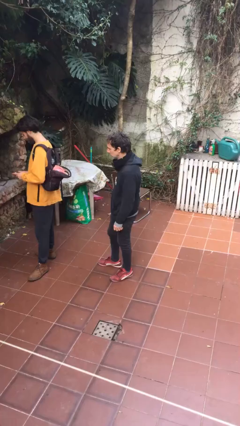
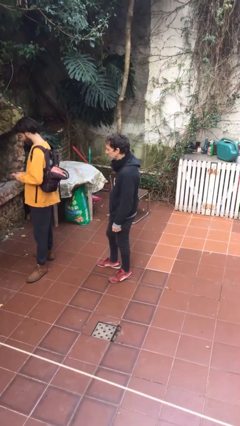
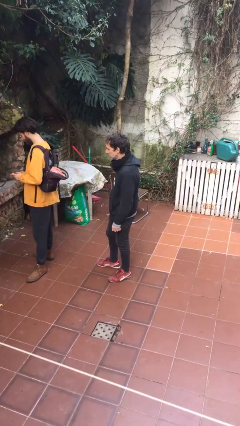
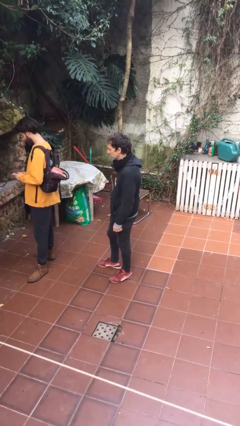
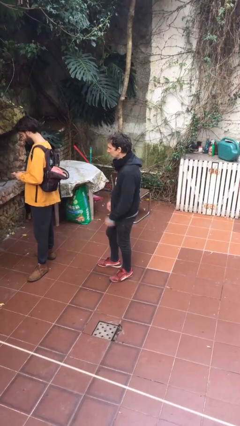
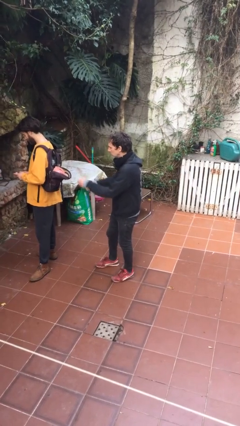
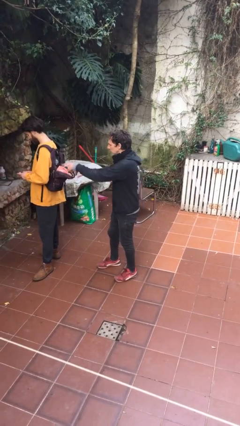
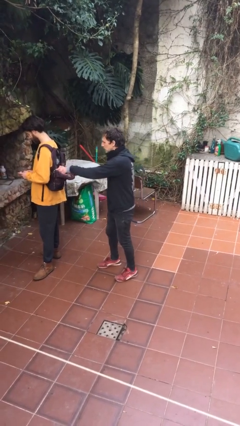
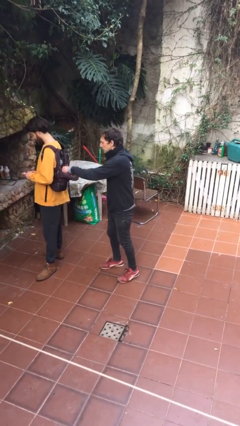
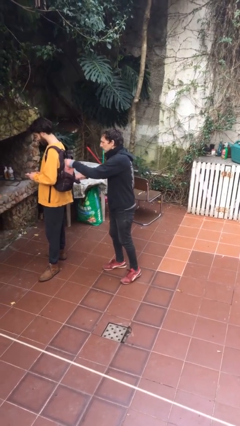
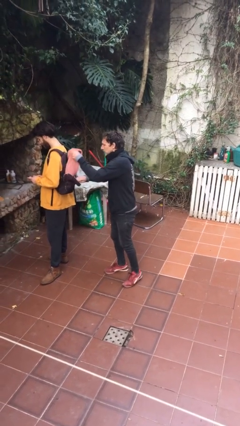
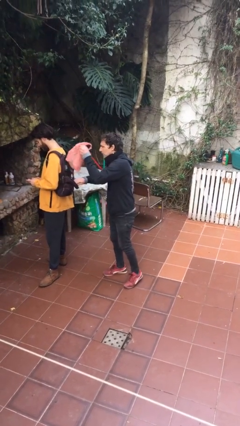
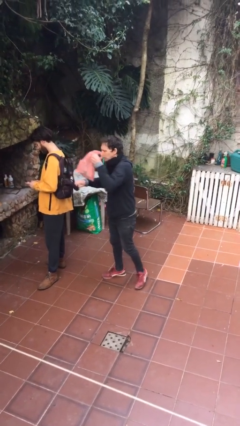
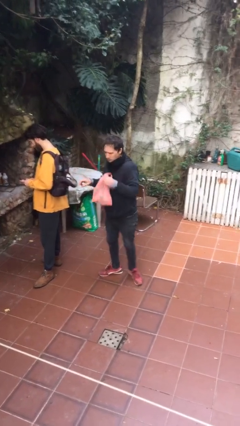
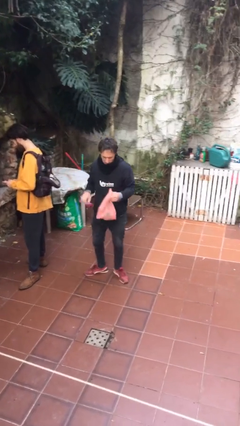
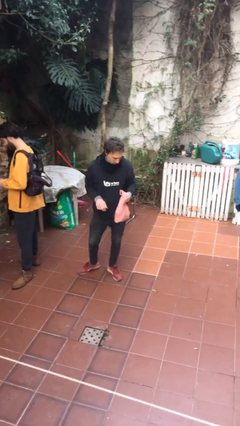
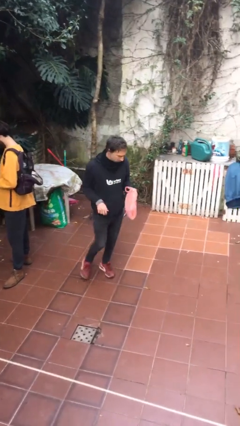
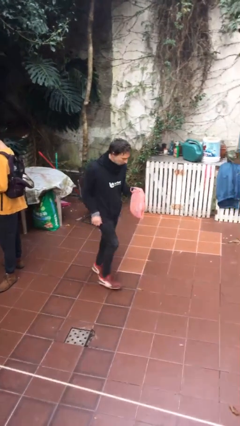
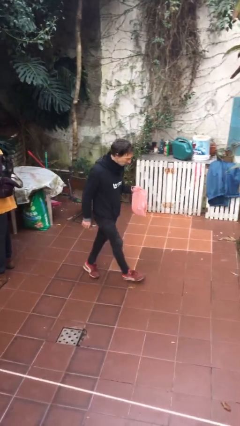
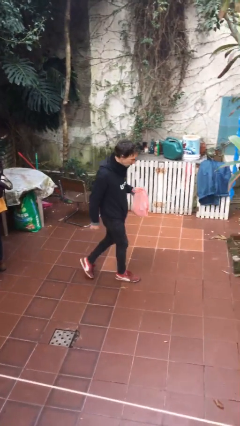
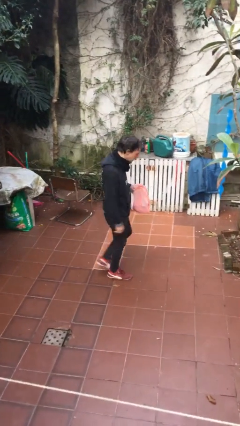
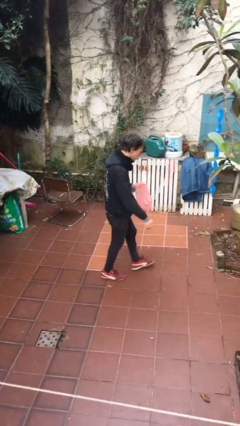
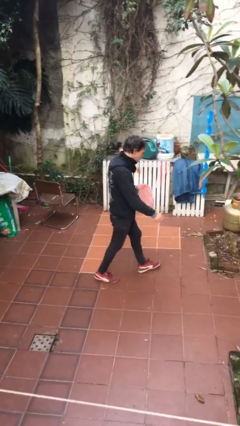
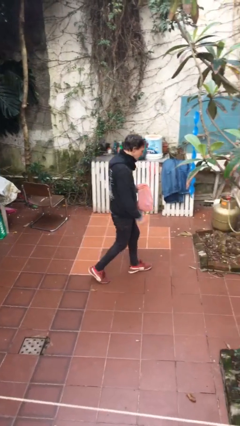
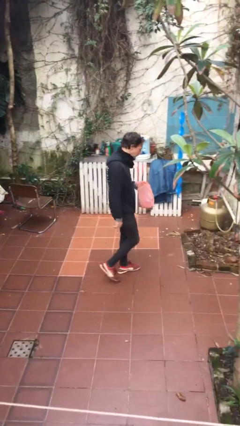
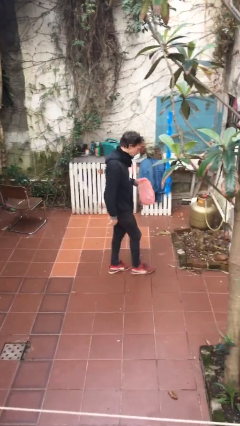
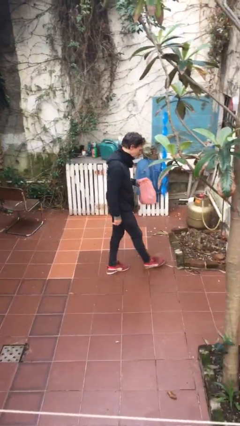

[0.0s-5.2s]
person steals object from person

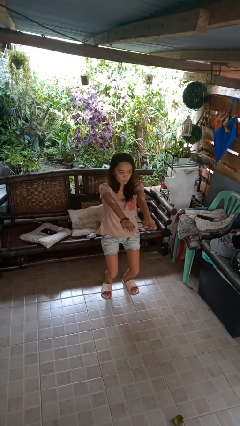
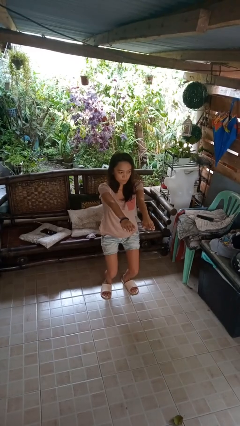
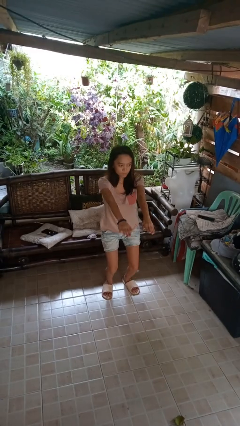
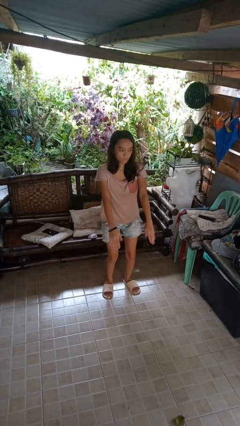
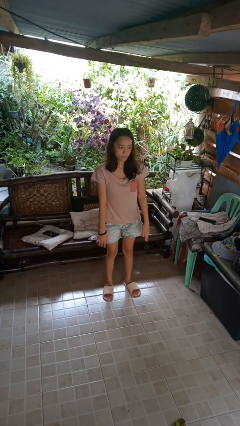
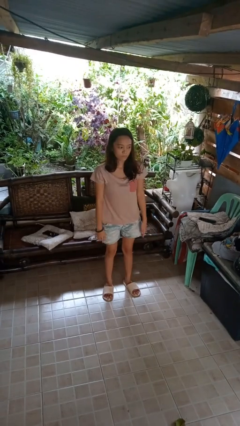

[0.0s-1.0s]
person stands up

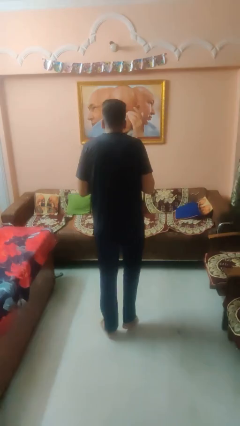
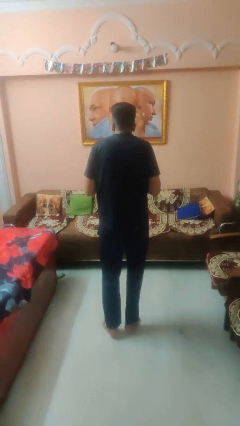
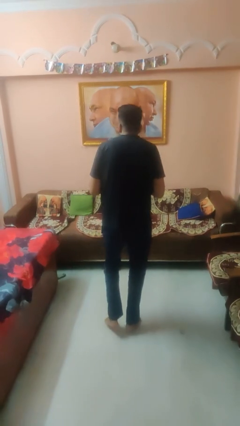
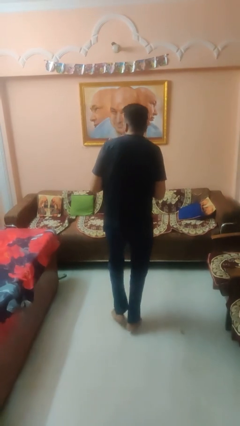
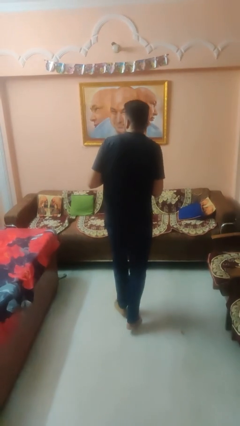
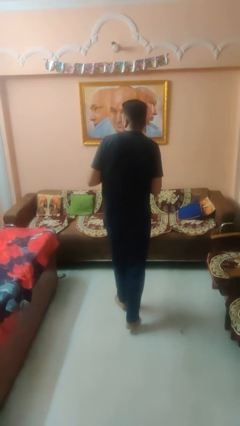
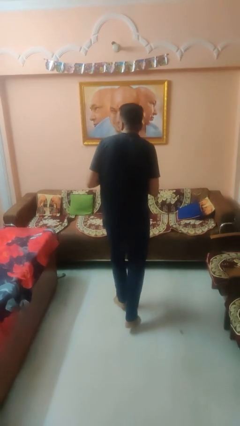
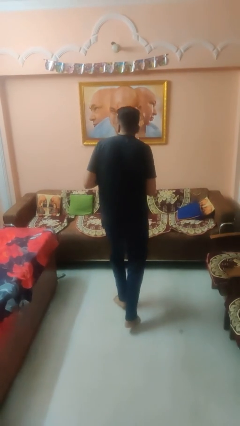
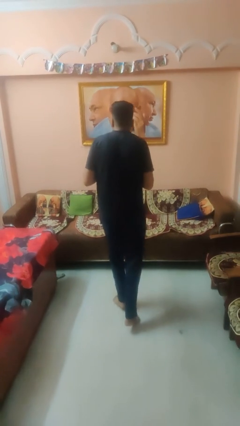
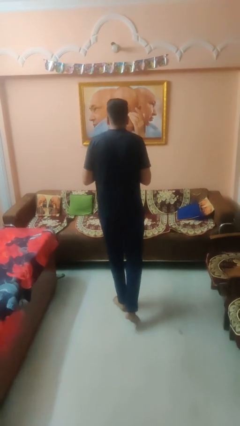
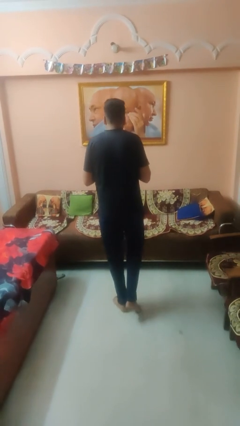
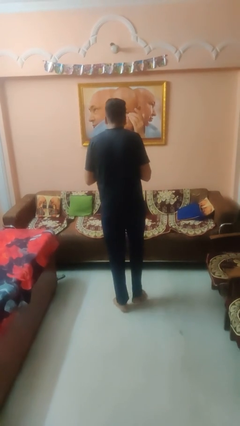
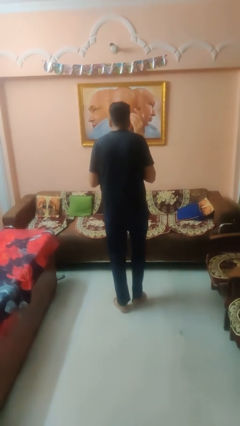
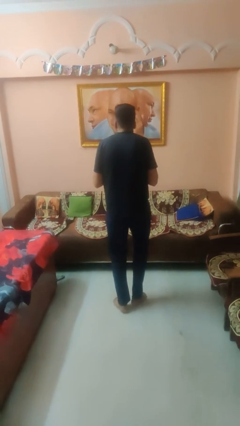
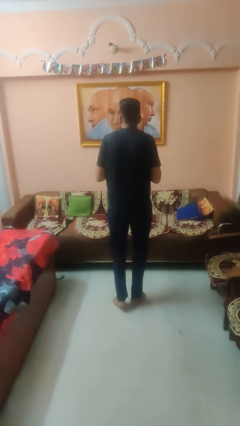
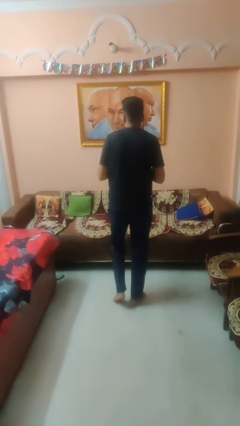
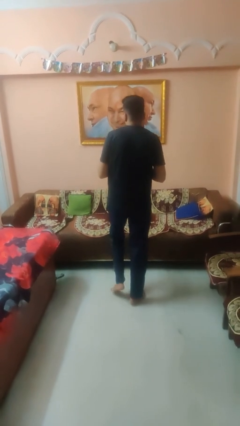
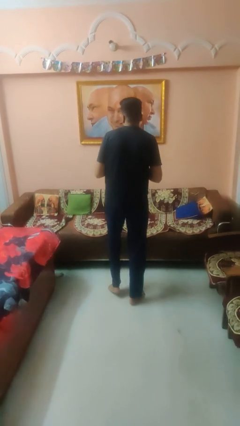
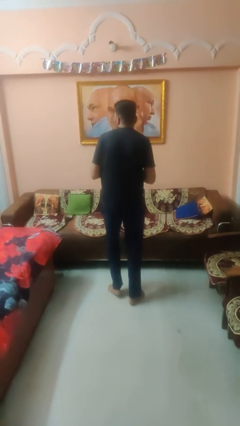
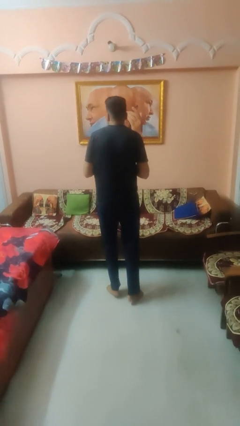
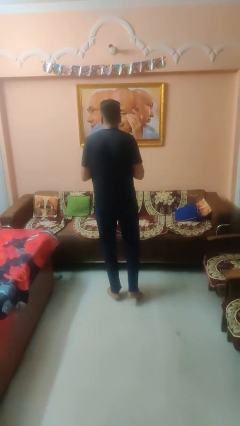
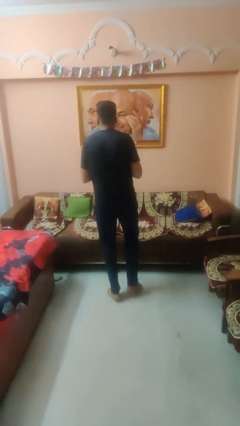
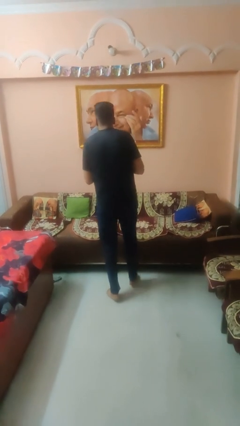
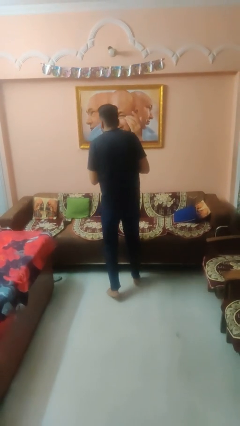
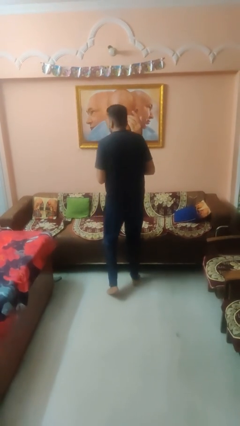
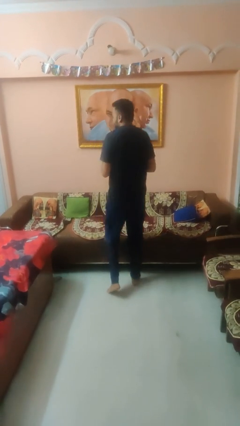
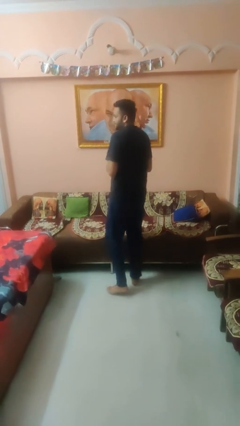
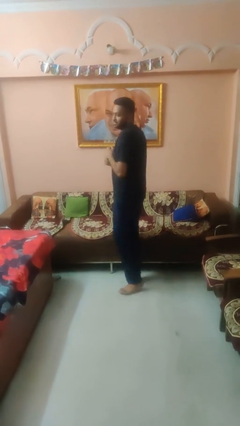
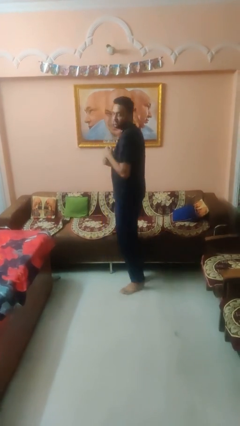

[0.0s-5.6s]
person walks tiptoe

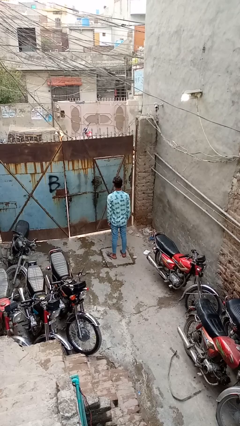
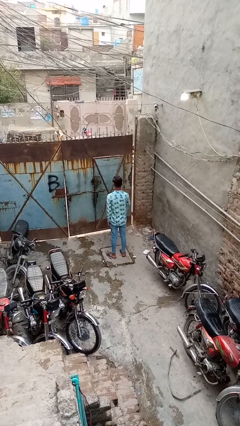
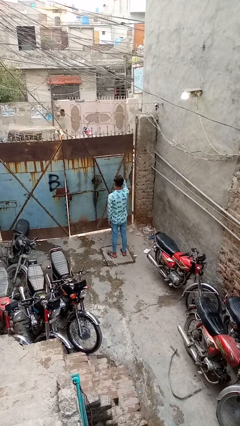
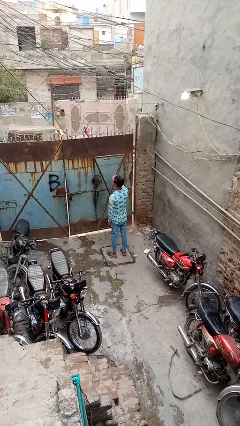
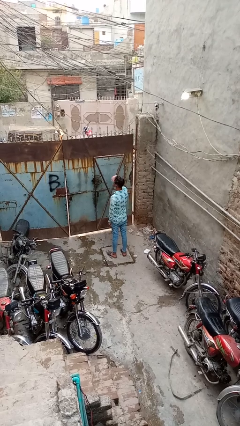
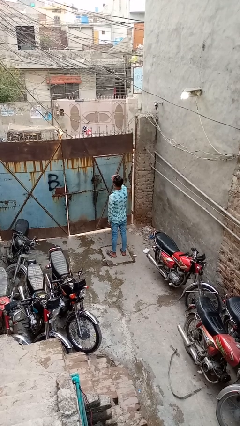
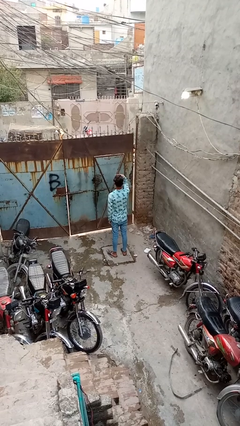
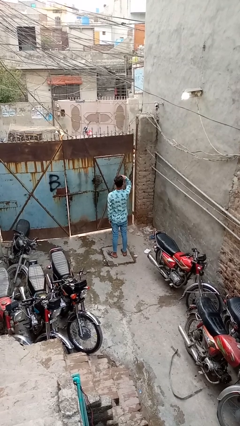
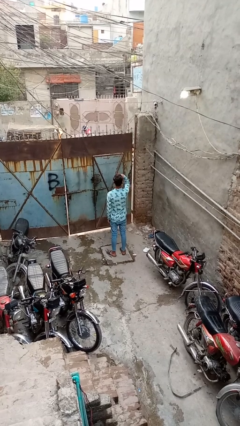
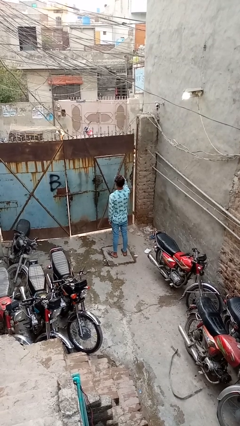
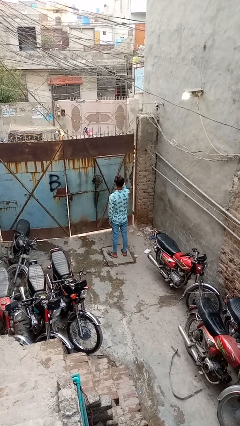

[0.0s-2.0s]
person shades eyes

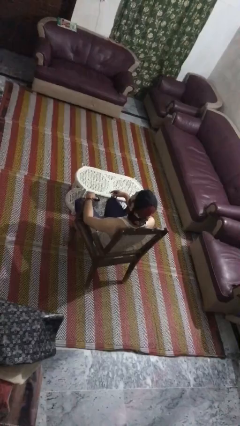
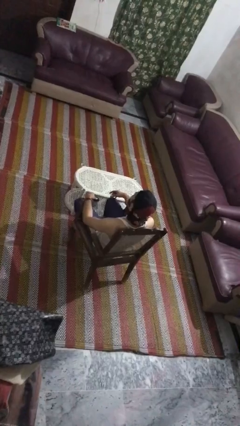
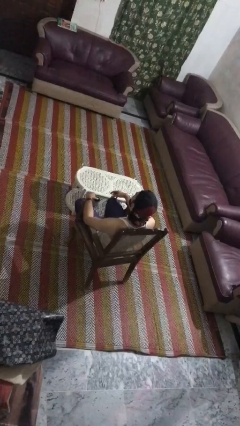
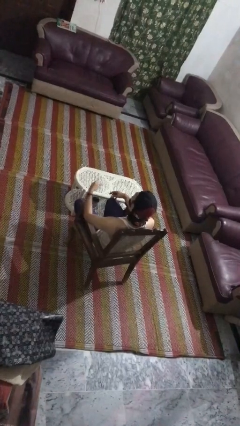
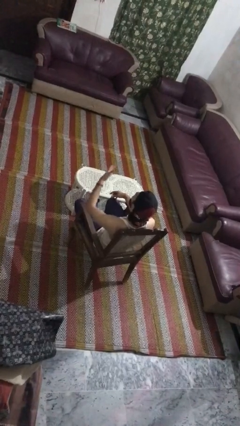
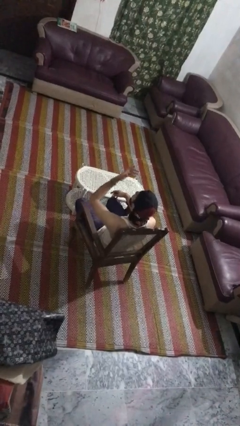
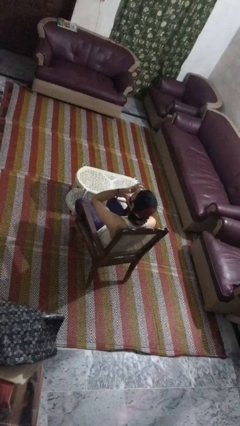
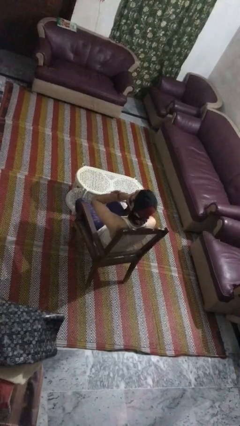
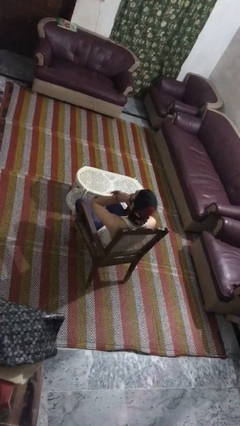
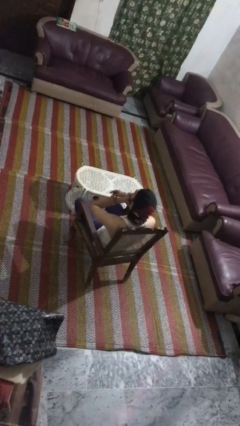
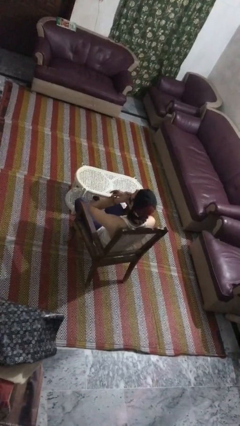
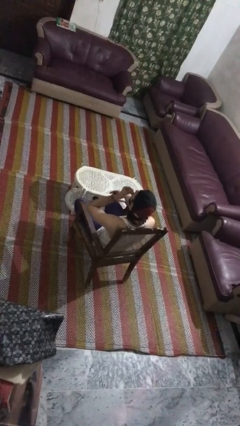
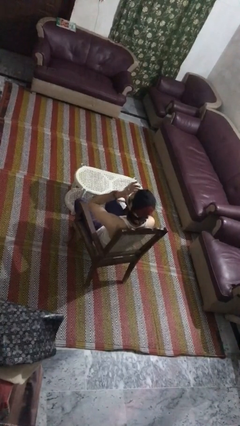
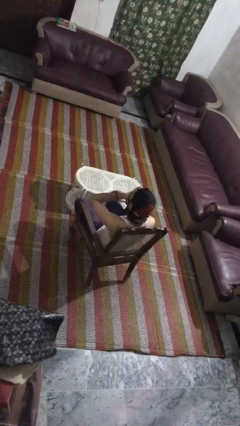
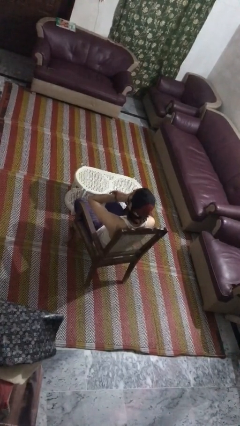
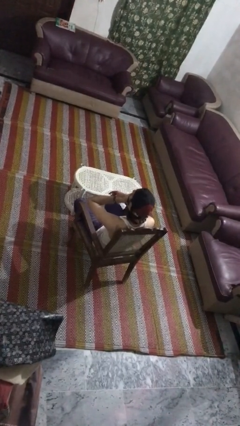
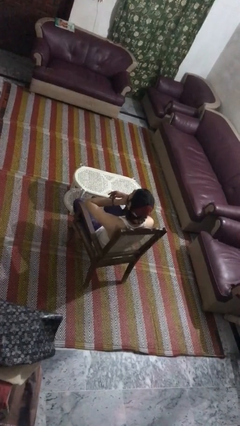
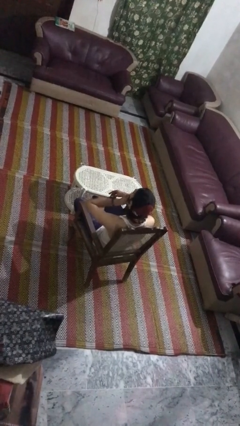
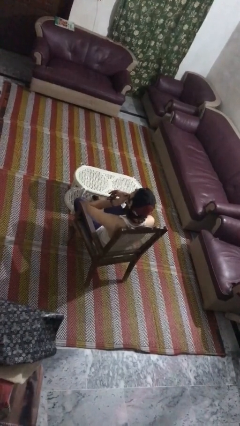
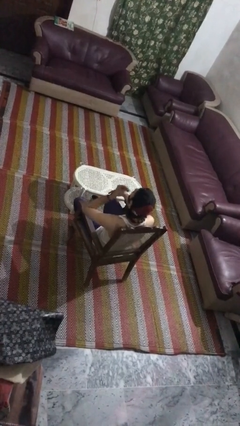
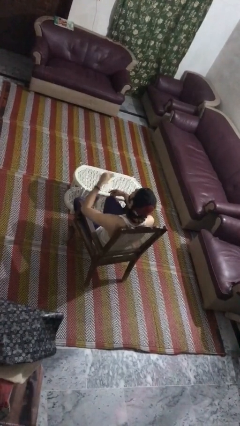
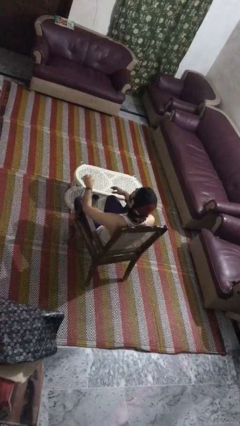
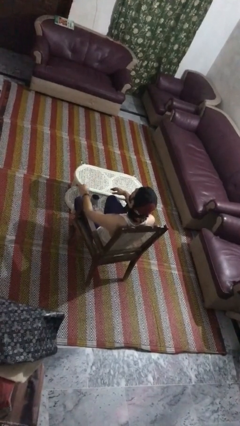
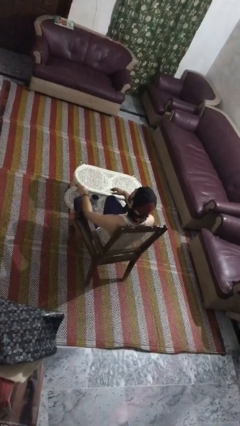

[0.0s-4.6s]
person strokes chin
